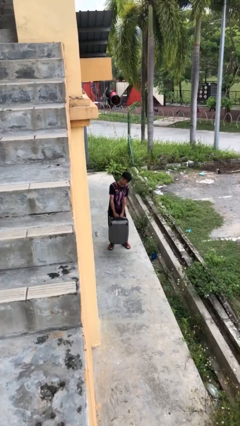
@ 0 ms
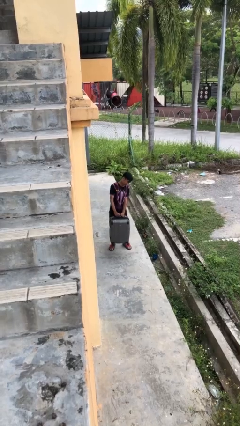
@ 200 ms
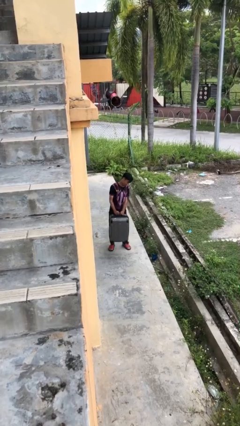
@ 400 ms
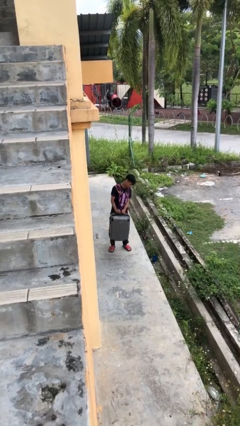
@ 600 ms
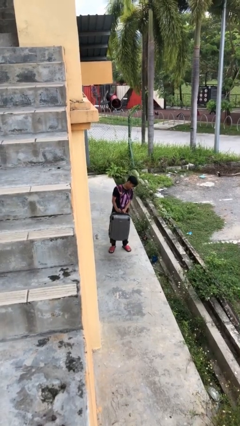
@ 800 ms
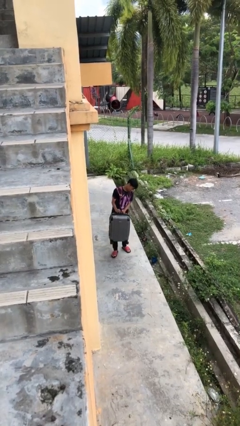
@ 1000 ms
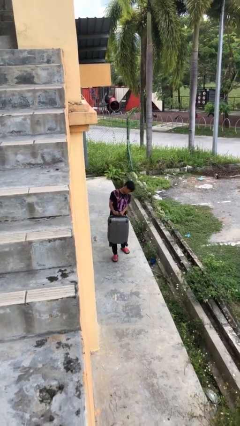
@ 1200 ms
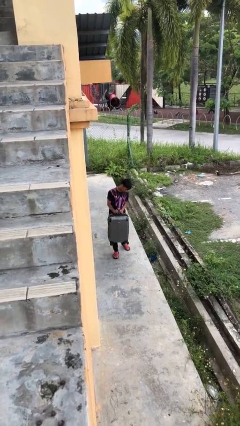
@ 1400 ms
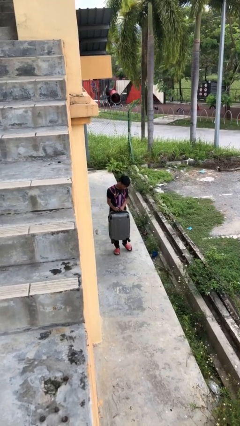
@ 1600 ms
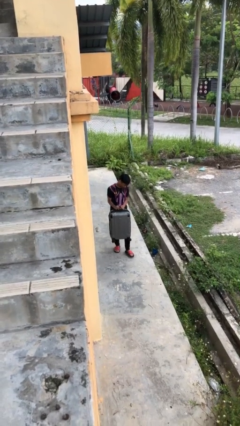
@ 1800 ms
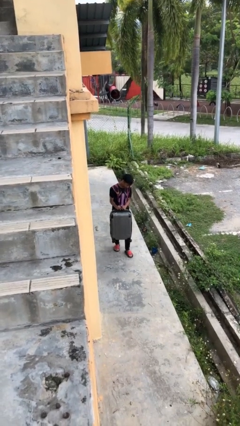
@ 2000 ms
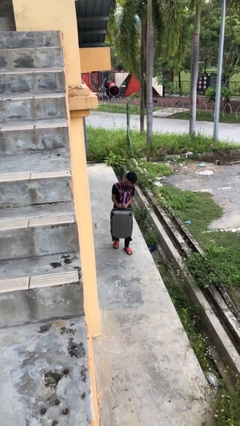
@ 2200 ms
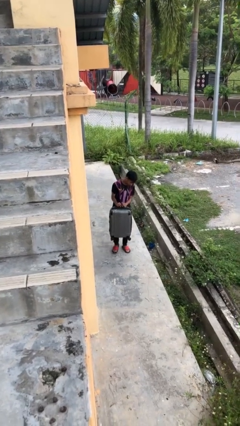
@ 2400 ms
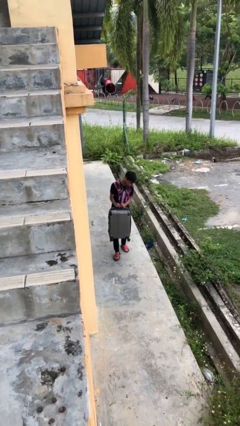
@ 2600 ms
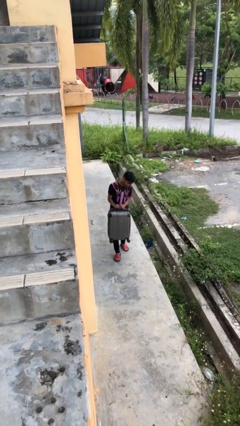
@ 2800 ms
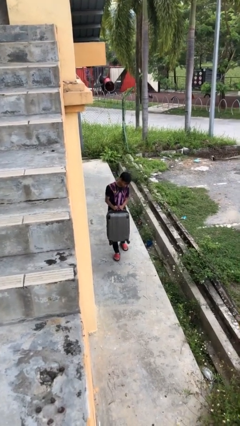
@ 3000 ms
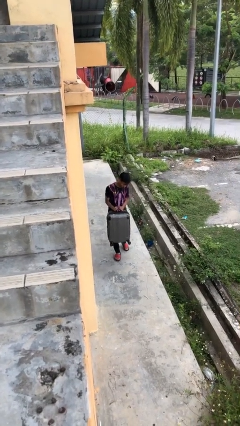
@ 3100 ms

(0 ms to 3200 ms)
person carries heavy object

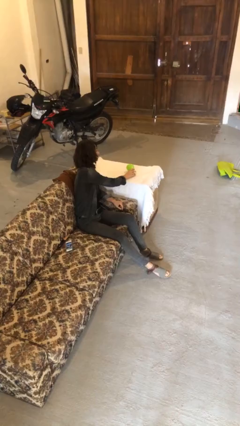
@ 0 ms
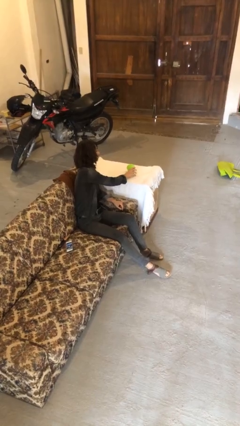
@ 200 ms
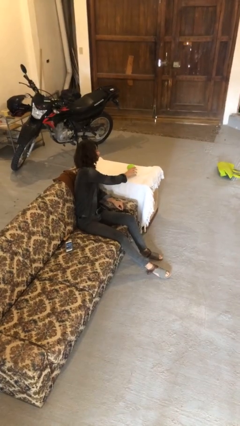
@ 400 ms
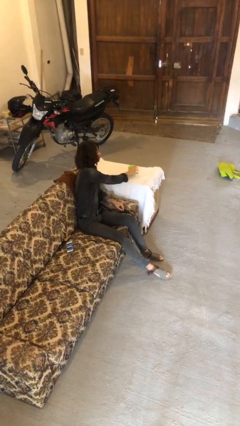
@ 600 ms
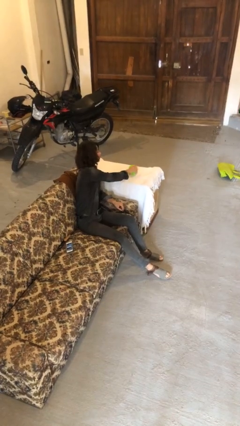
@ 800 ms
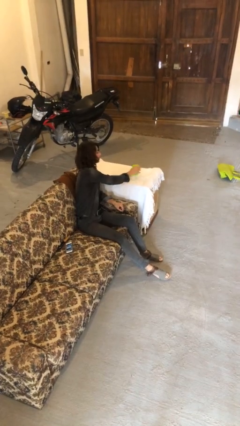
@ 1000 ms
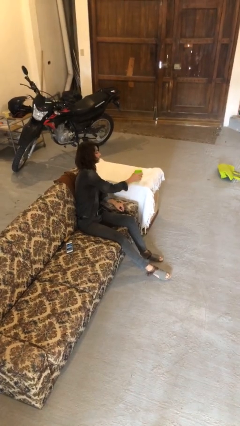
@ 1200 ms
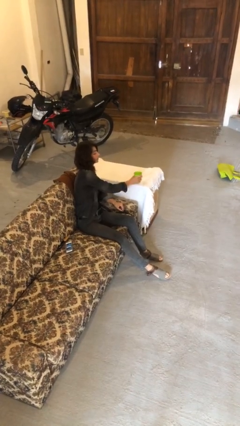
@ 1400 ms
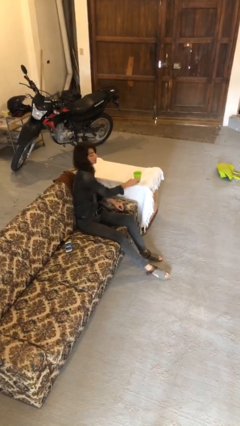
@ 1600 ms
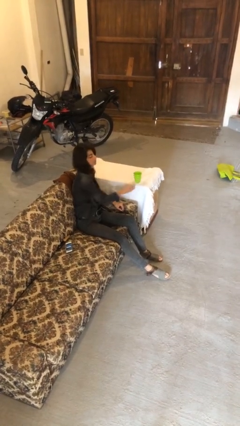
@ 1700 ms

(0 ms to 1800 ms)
person sets upright glass

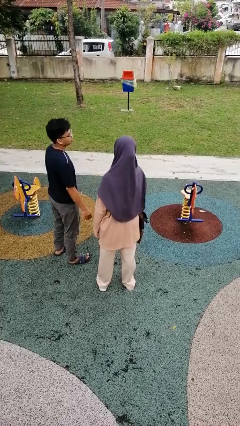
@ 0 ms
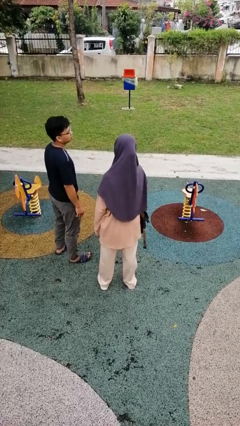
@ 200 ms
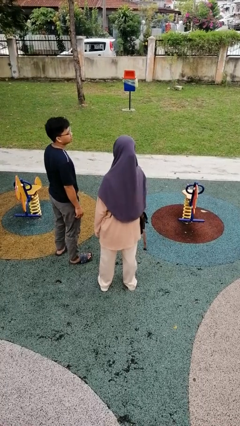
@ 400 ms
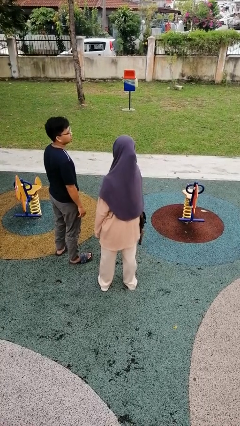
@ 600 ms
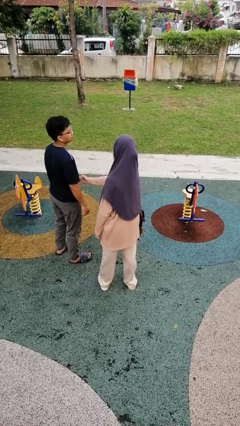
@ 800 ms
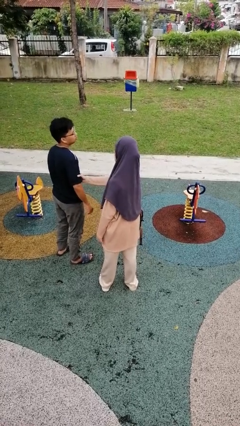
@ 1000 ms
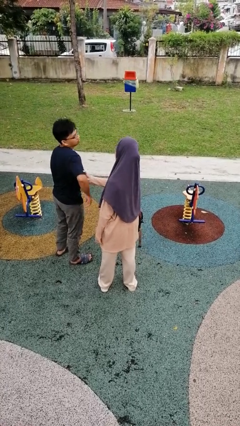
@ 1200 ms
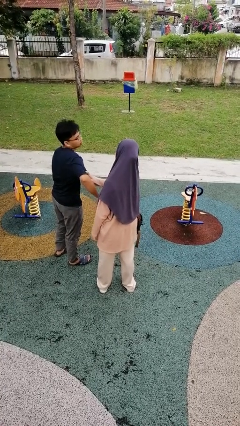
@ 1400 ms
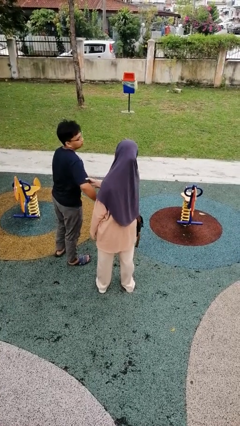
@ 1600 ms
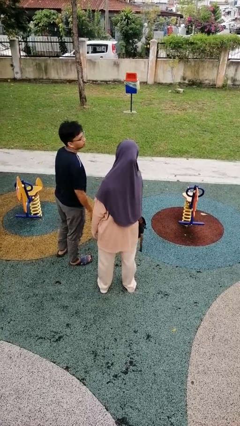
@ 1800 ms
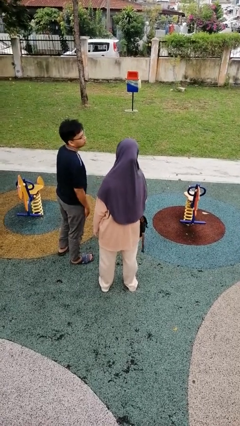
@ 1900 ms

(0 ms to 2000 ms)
person grabs person by bicep

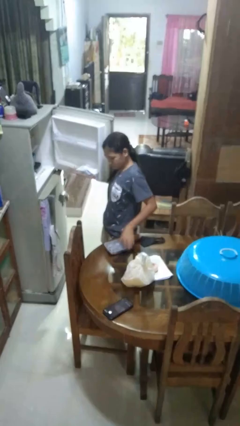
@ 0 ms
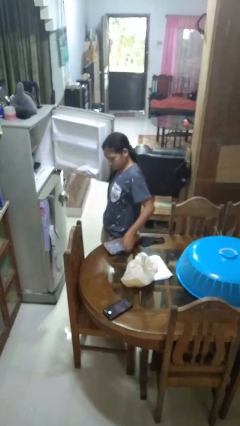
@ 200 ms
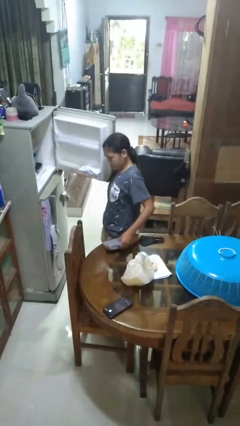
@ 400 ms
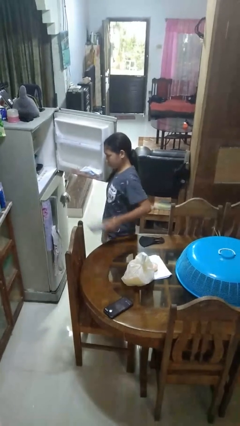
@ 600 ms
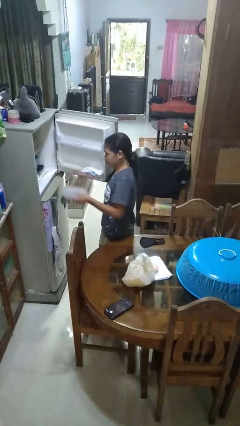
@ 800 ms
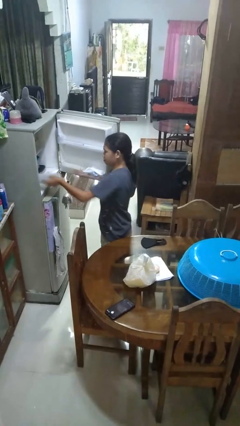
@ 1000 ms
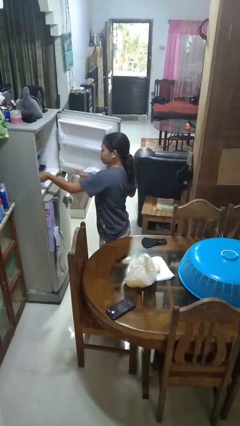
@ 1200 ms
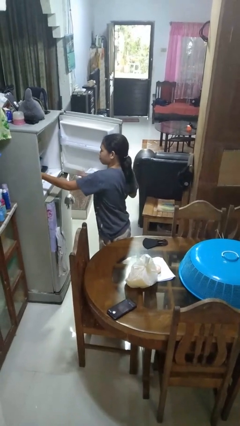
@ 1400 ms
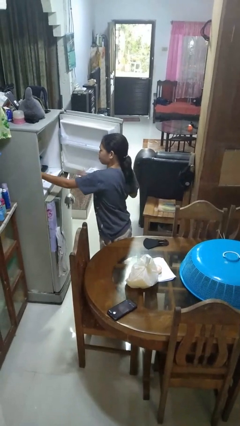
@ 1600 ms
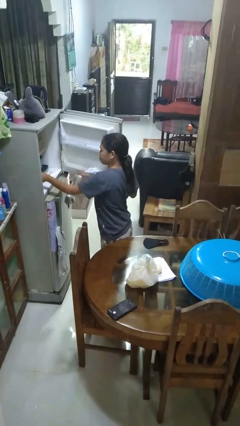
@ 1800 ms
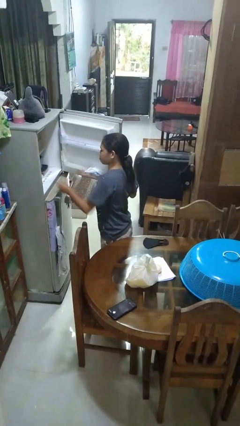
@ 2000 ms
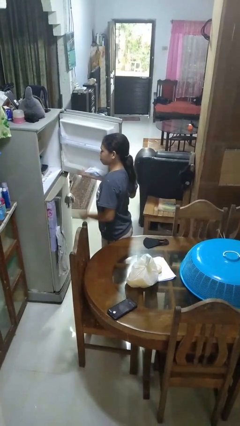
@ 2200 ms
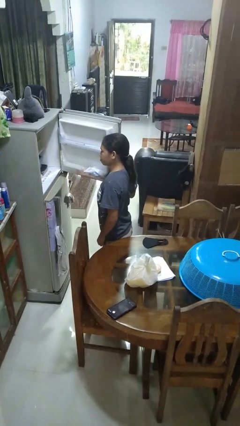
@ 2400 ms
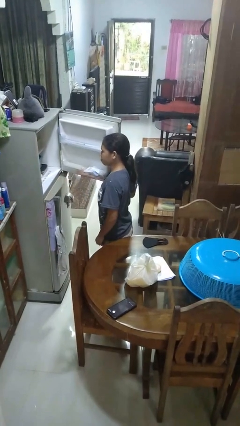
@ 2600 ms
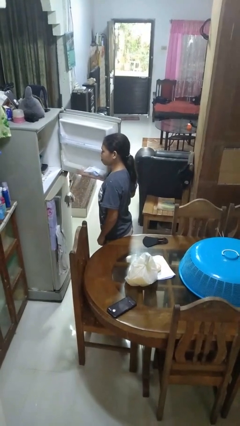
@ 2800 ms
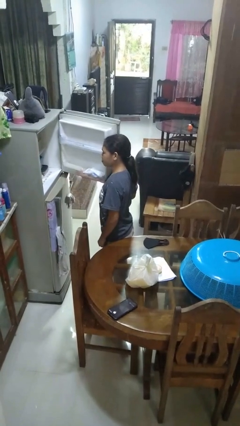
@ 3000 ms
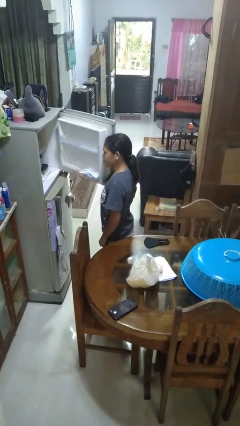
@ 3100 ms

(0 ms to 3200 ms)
person puts object into refrigerator

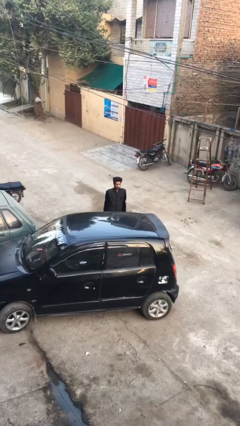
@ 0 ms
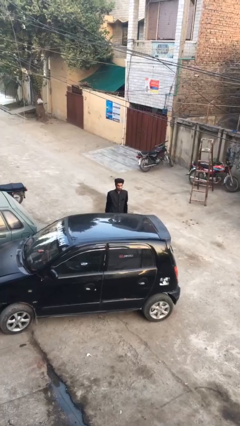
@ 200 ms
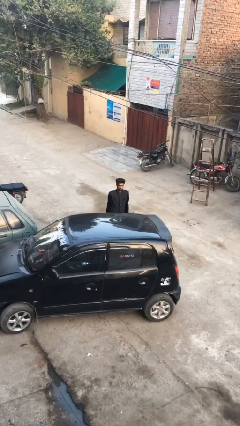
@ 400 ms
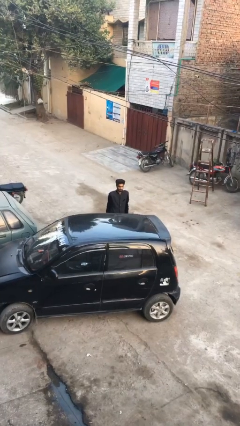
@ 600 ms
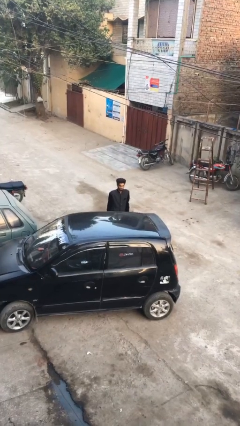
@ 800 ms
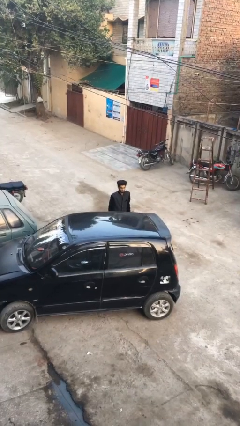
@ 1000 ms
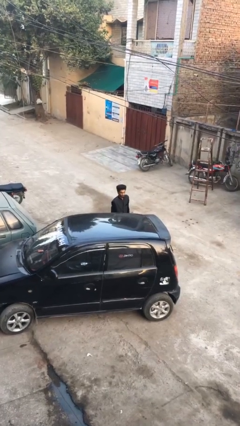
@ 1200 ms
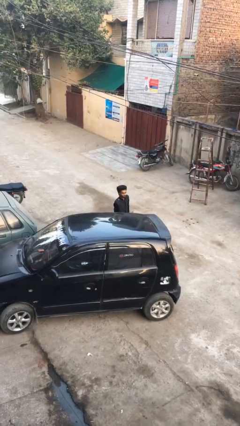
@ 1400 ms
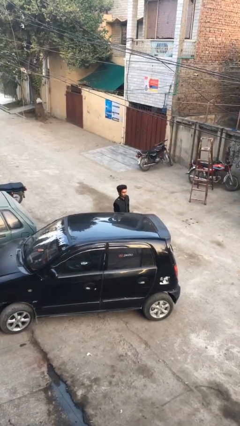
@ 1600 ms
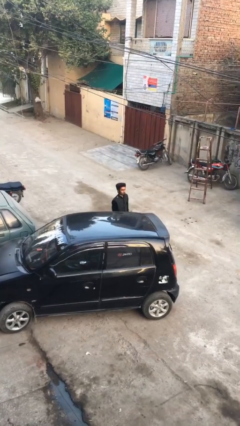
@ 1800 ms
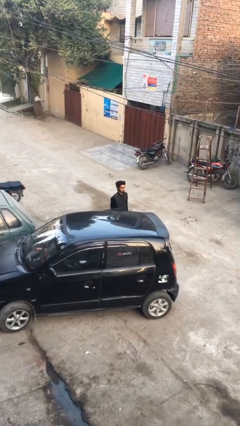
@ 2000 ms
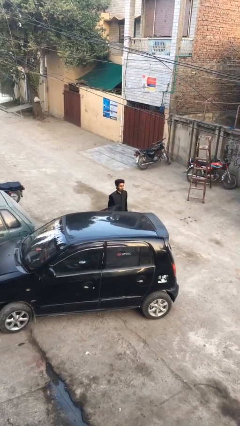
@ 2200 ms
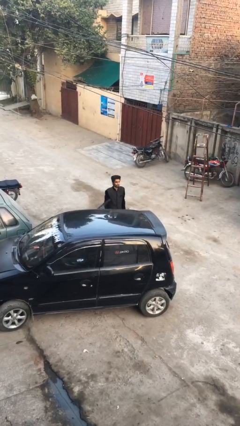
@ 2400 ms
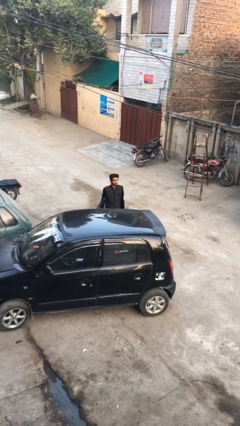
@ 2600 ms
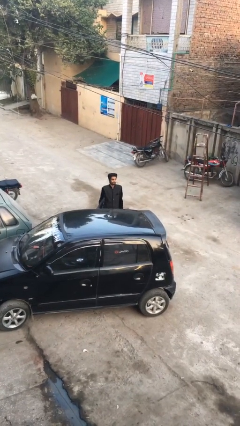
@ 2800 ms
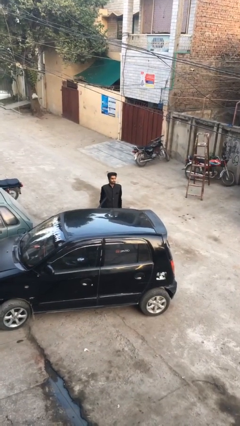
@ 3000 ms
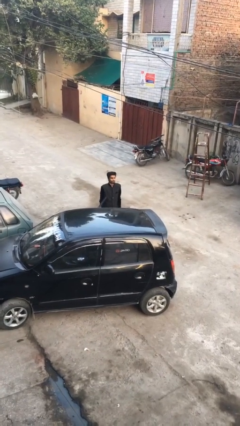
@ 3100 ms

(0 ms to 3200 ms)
person opens car door

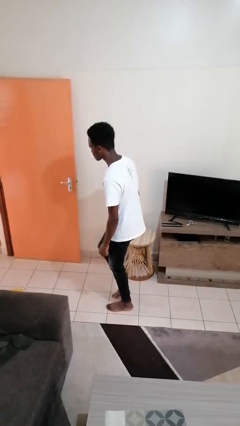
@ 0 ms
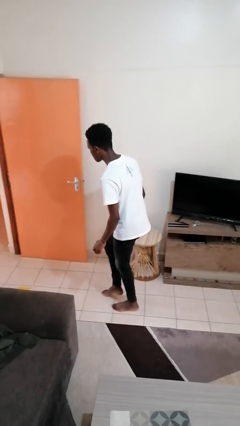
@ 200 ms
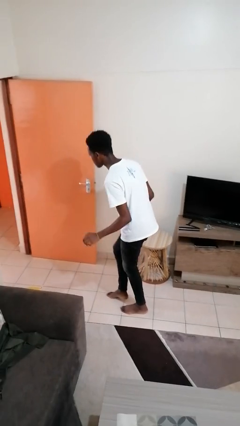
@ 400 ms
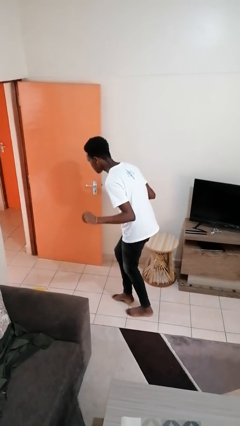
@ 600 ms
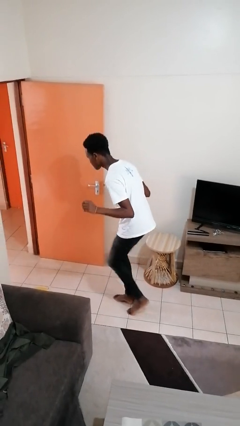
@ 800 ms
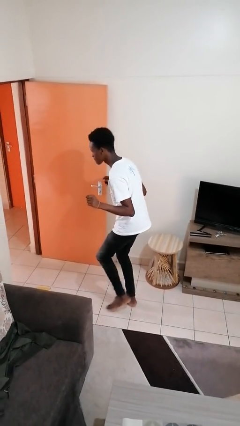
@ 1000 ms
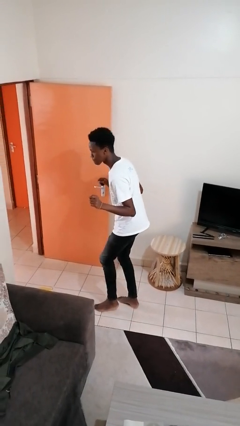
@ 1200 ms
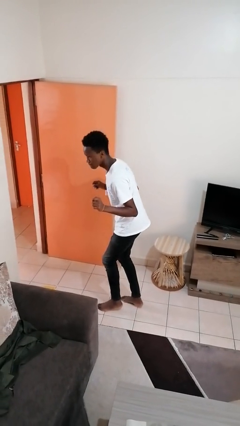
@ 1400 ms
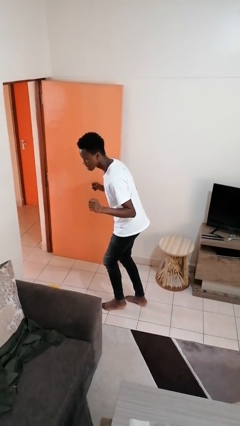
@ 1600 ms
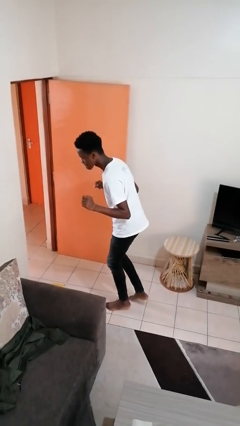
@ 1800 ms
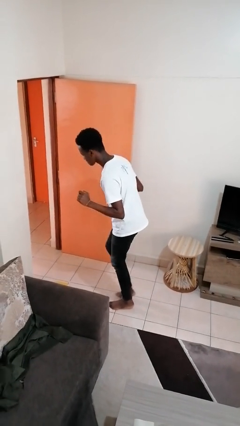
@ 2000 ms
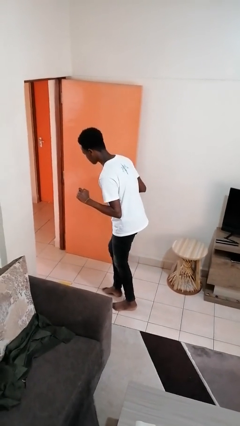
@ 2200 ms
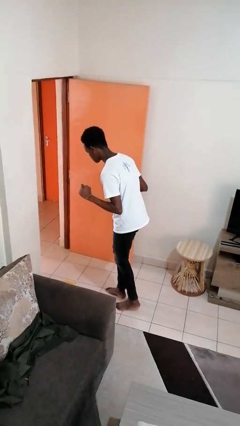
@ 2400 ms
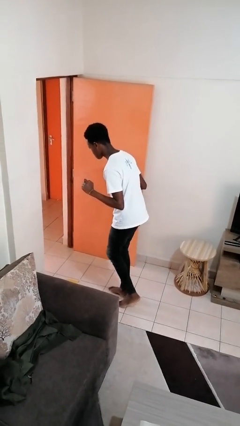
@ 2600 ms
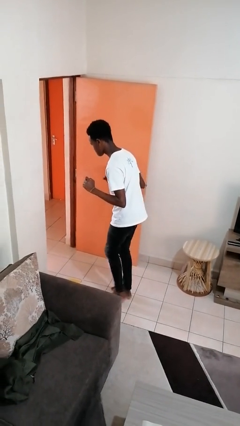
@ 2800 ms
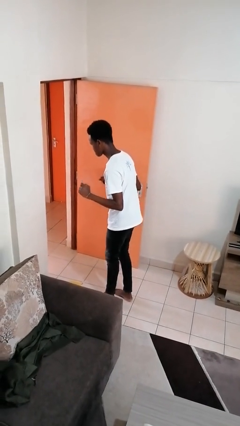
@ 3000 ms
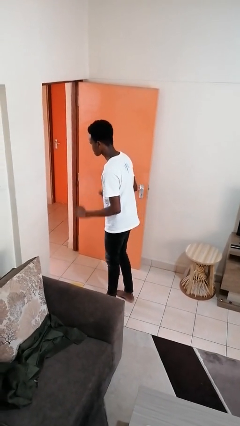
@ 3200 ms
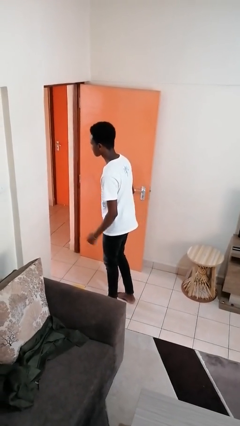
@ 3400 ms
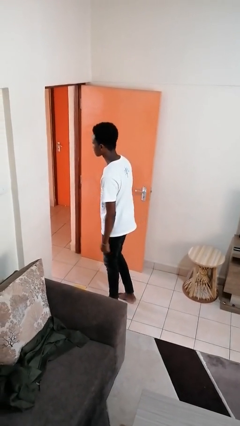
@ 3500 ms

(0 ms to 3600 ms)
person walks tiptoe
